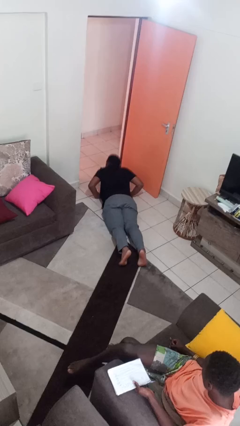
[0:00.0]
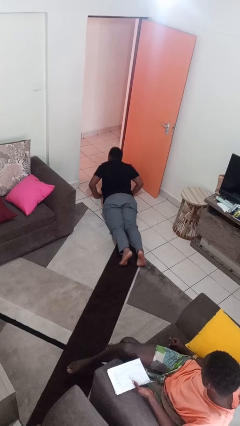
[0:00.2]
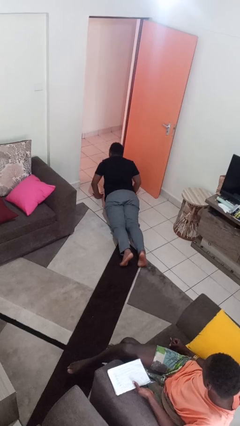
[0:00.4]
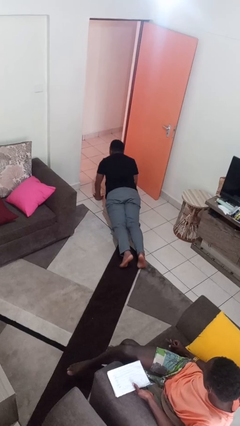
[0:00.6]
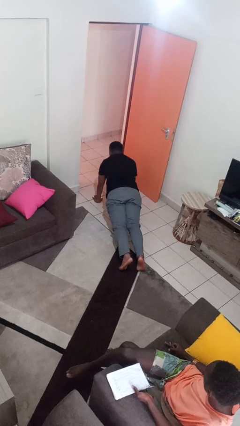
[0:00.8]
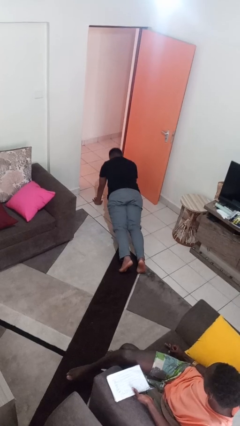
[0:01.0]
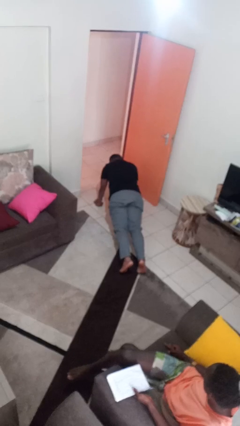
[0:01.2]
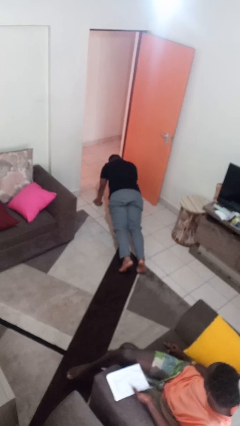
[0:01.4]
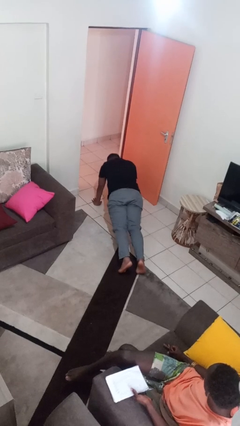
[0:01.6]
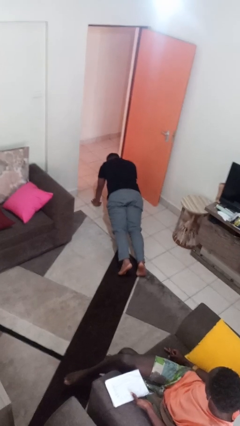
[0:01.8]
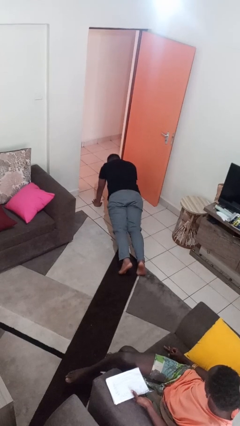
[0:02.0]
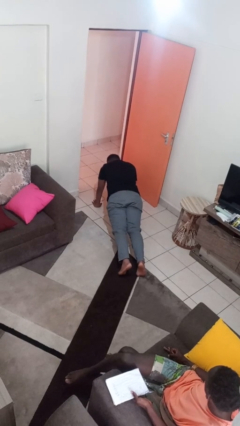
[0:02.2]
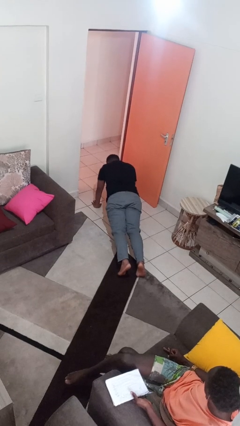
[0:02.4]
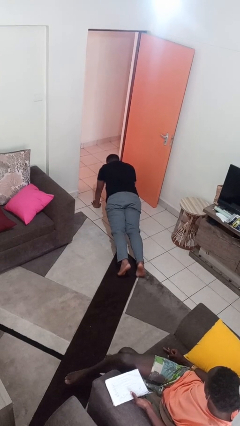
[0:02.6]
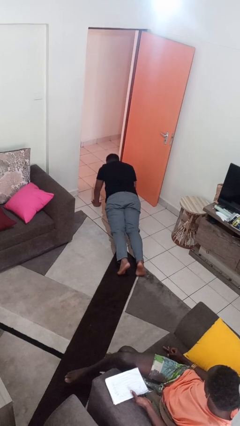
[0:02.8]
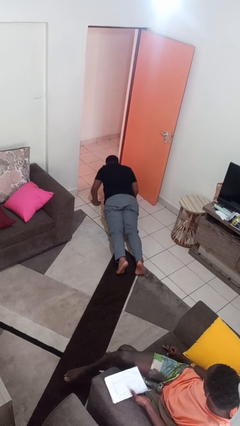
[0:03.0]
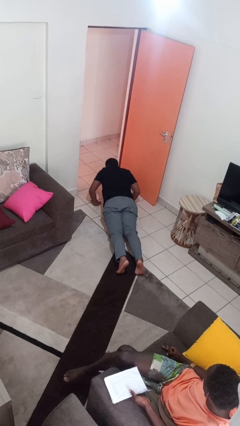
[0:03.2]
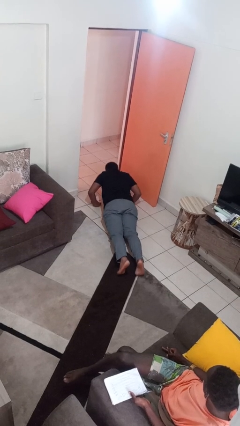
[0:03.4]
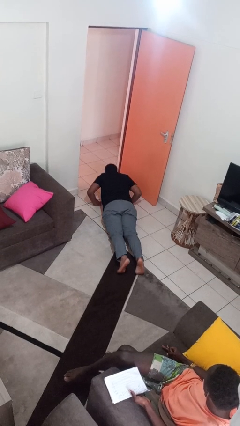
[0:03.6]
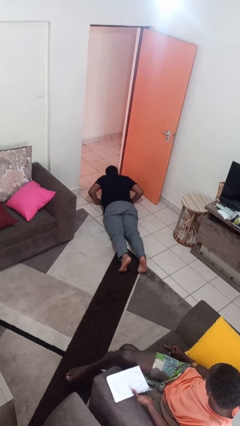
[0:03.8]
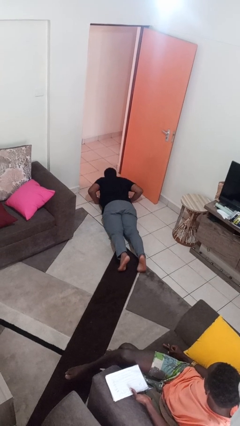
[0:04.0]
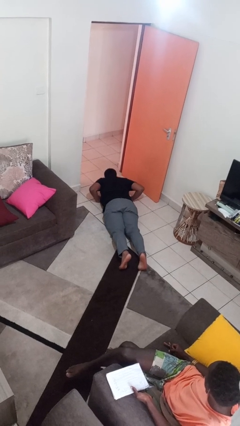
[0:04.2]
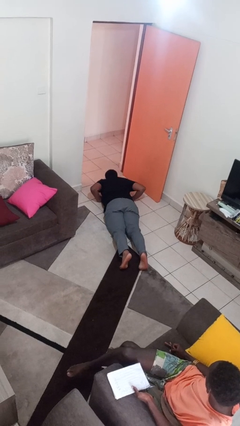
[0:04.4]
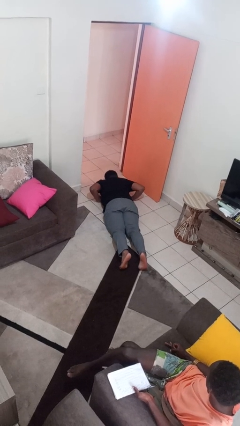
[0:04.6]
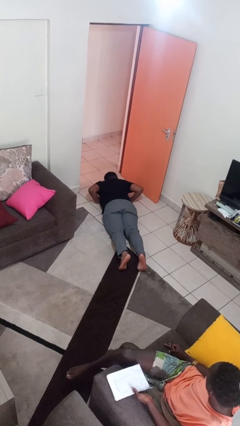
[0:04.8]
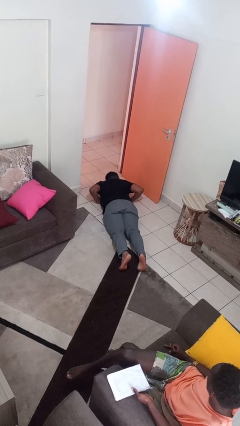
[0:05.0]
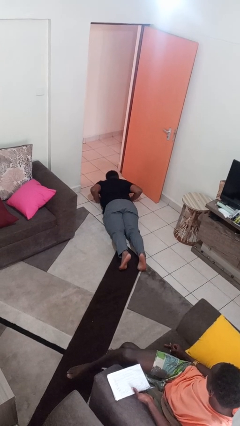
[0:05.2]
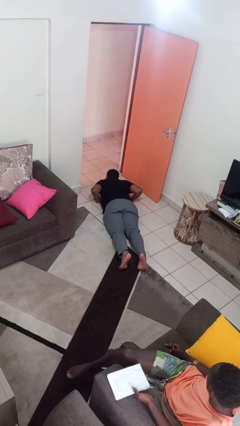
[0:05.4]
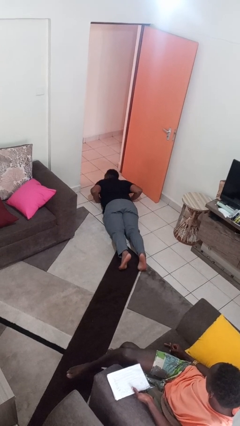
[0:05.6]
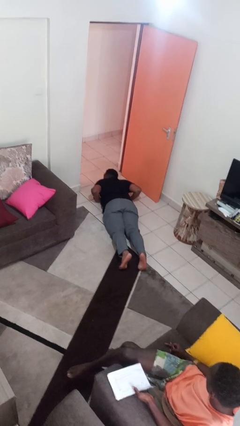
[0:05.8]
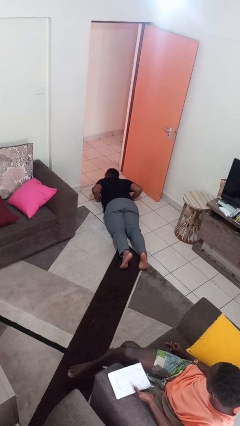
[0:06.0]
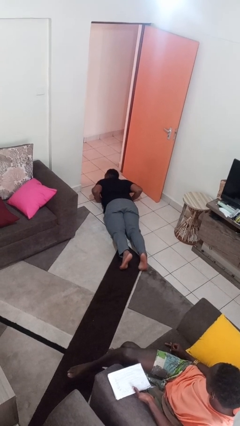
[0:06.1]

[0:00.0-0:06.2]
person exercises with pushup

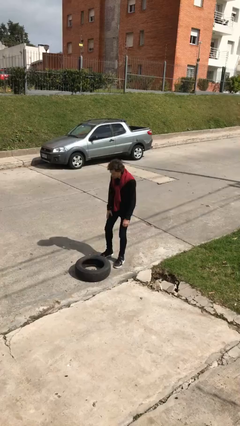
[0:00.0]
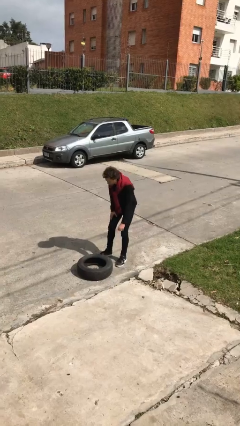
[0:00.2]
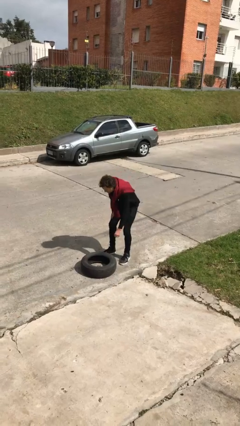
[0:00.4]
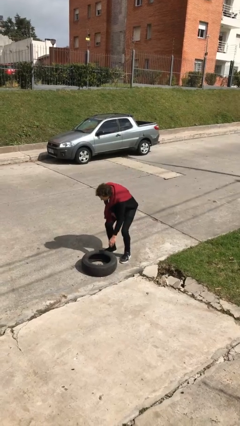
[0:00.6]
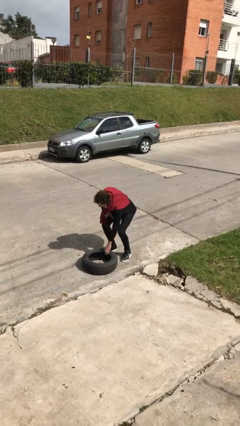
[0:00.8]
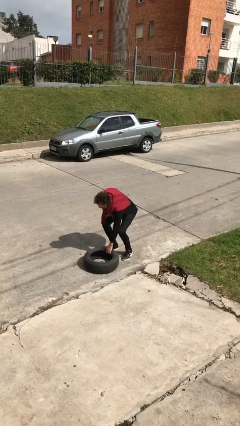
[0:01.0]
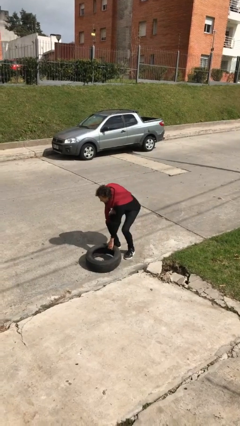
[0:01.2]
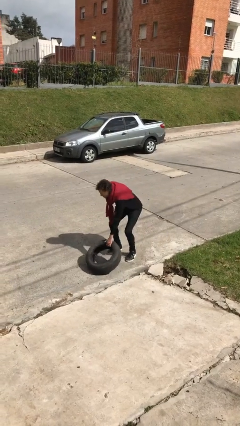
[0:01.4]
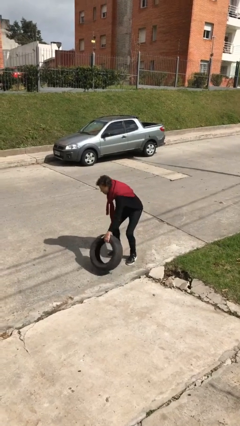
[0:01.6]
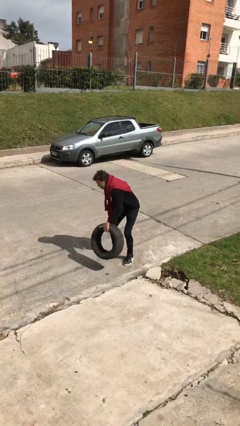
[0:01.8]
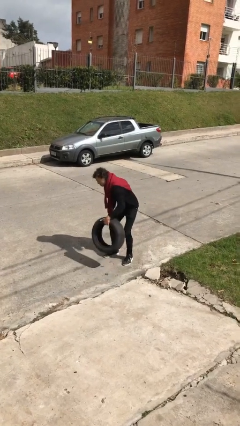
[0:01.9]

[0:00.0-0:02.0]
person picks up object from floor

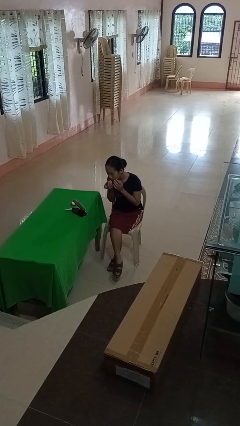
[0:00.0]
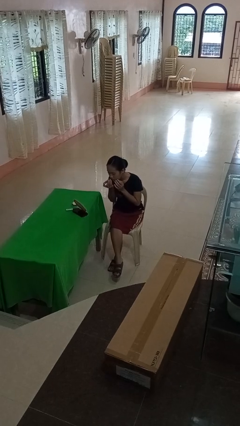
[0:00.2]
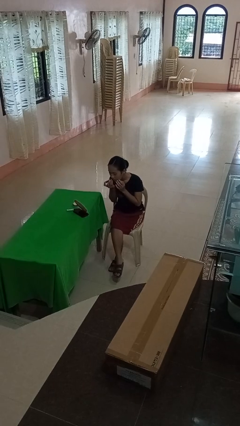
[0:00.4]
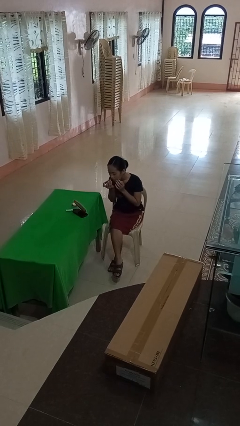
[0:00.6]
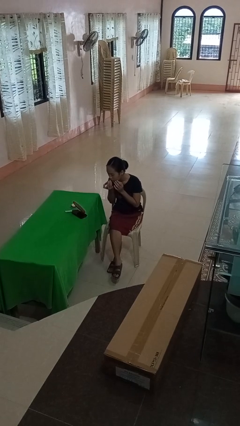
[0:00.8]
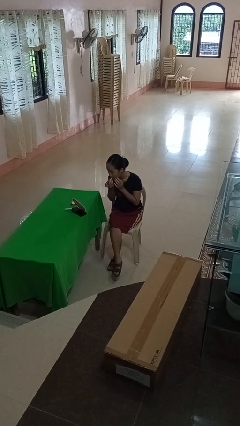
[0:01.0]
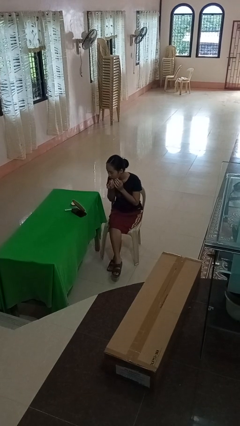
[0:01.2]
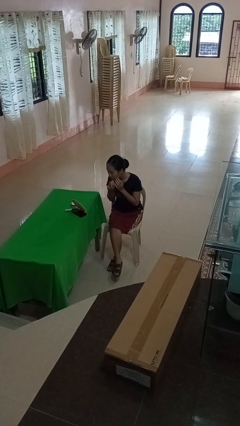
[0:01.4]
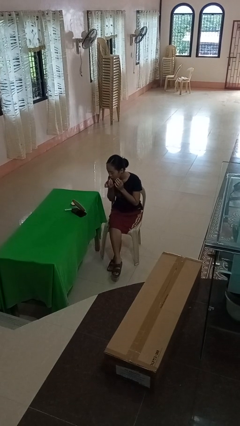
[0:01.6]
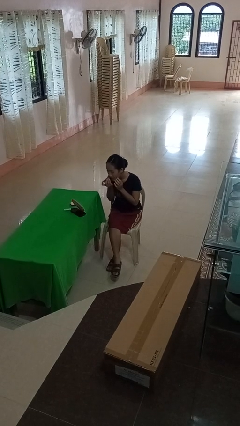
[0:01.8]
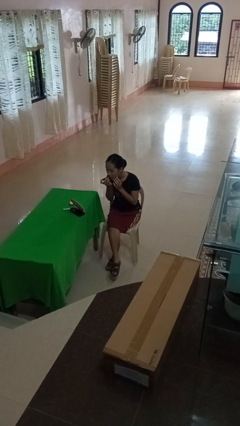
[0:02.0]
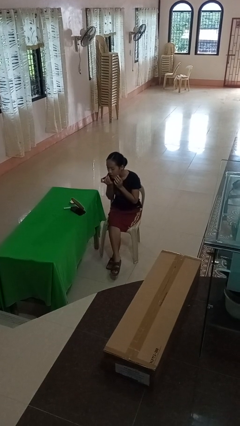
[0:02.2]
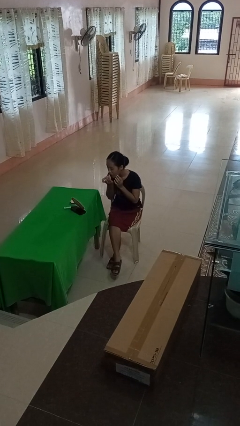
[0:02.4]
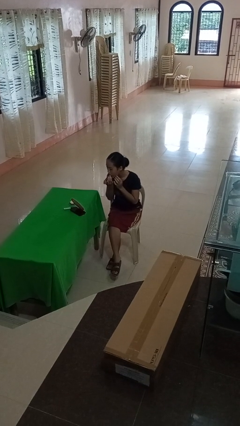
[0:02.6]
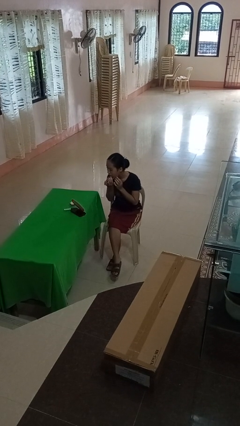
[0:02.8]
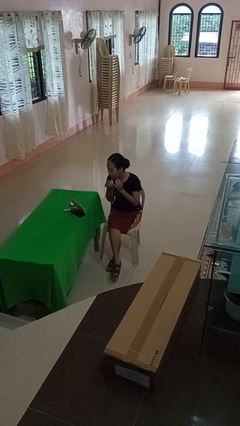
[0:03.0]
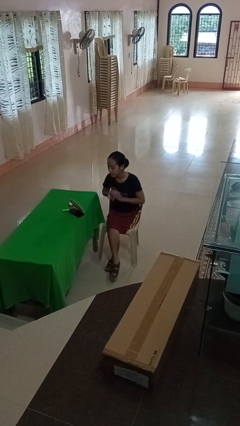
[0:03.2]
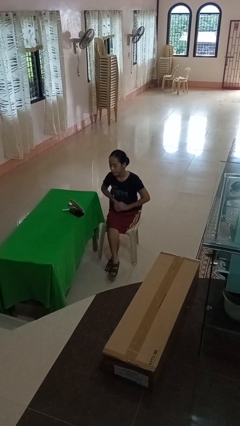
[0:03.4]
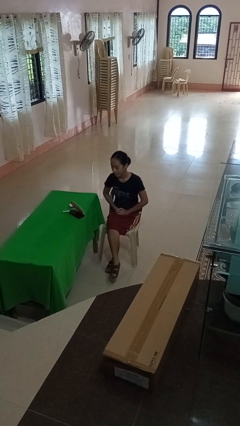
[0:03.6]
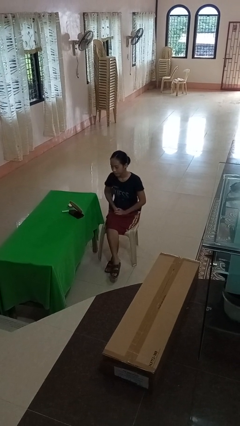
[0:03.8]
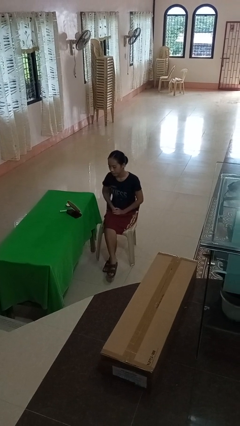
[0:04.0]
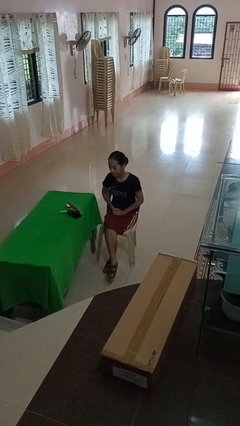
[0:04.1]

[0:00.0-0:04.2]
person applies lip makeup

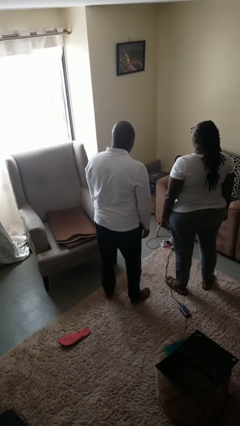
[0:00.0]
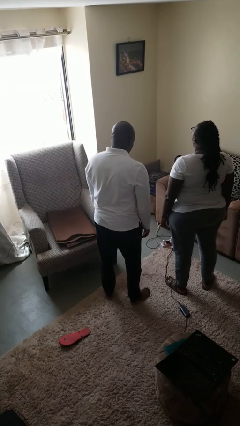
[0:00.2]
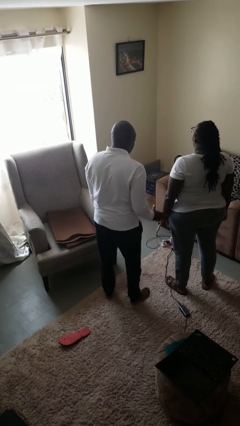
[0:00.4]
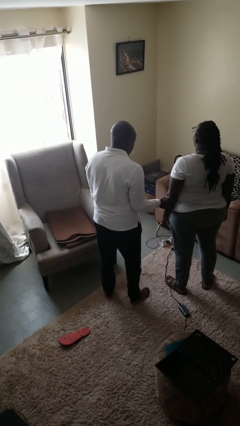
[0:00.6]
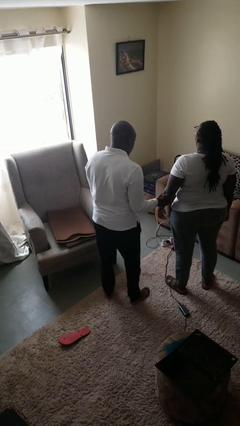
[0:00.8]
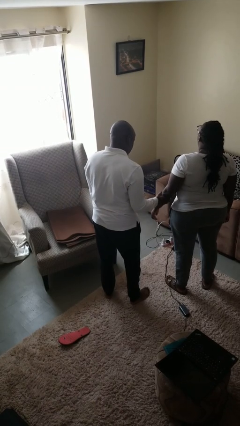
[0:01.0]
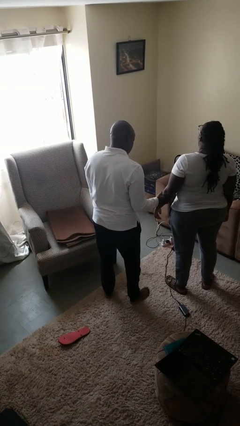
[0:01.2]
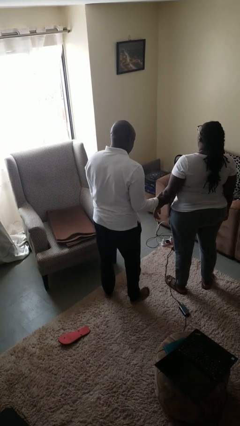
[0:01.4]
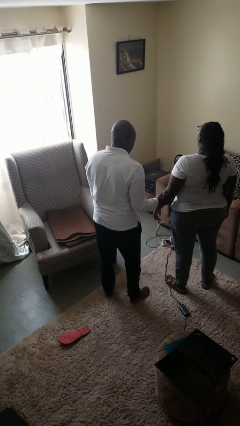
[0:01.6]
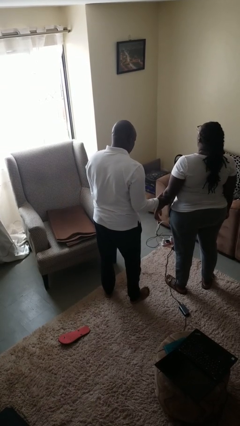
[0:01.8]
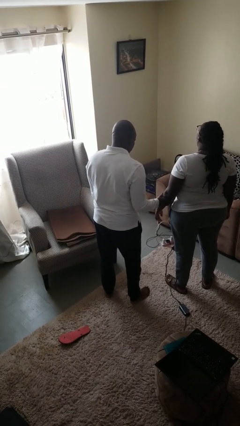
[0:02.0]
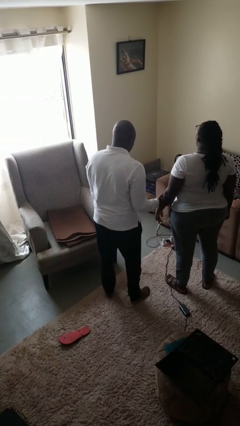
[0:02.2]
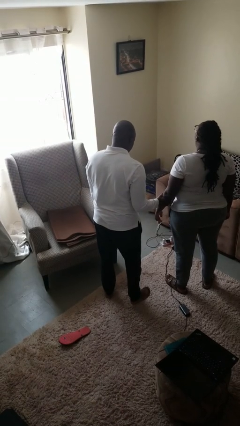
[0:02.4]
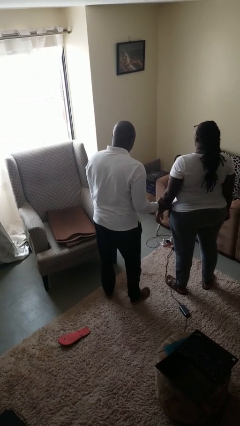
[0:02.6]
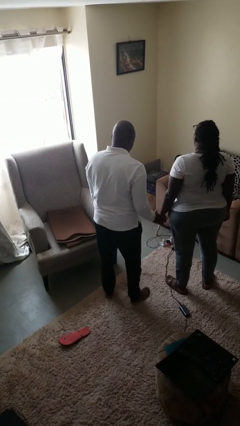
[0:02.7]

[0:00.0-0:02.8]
person grabs person by forearm

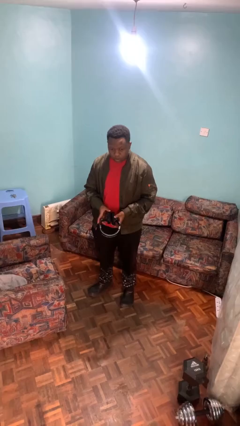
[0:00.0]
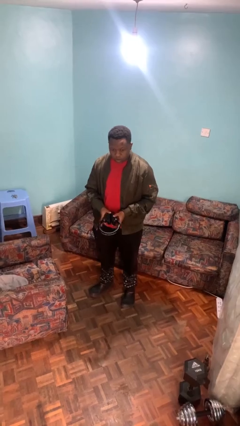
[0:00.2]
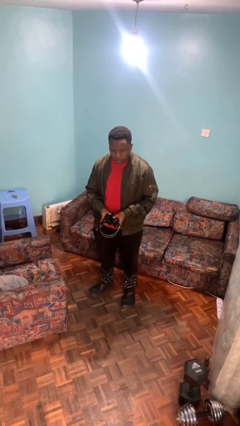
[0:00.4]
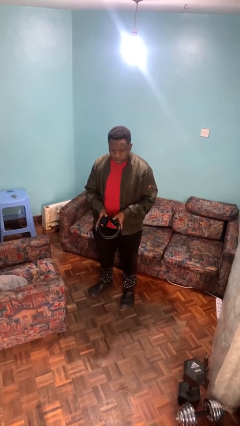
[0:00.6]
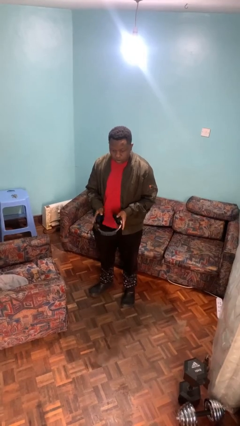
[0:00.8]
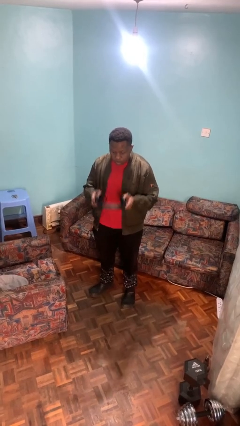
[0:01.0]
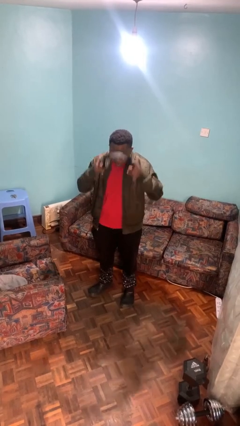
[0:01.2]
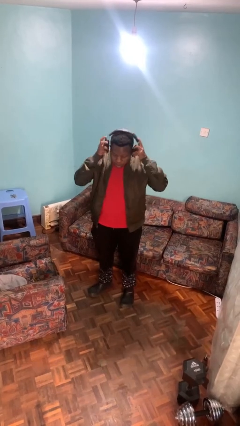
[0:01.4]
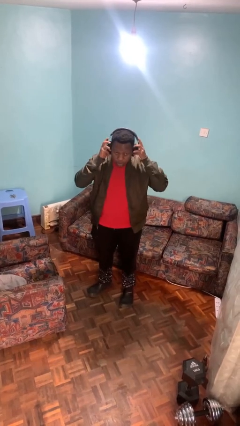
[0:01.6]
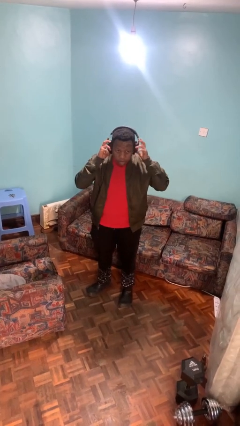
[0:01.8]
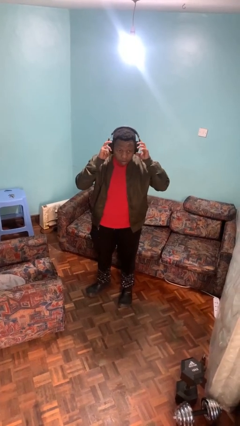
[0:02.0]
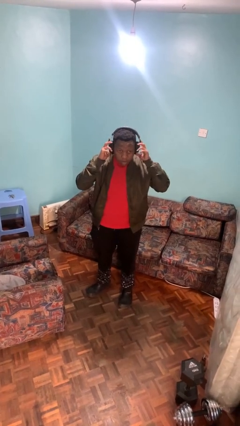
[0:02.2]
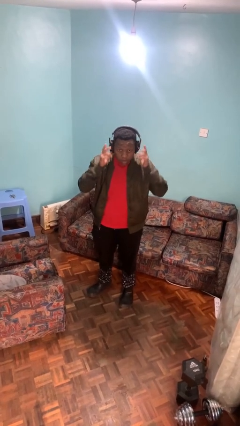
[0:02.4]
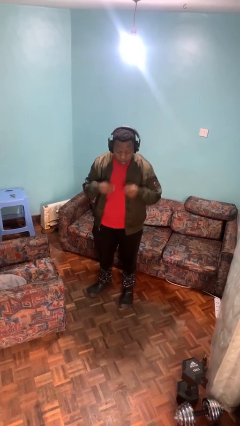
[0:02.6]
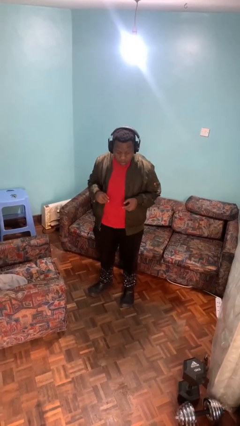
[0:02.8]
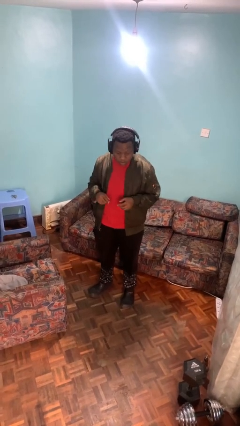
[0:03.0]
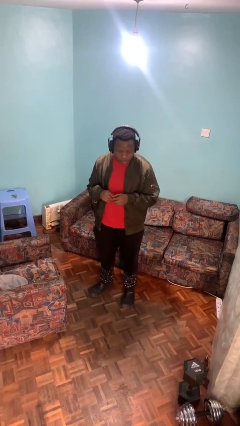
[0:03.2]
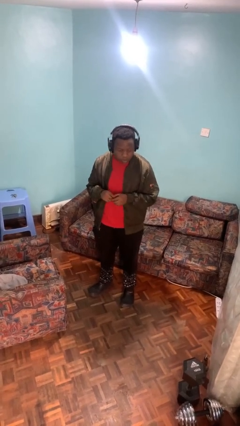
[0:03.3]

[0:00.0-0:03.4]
person puts on headphones
